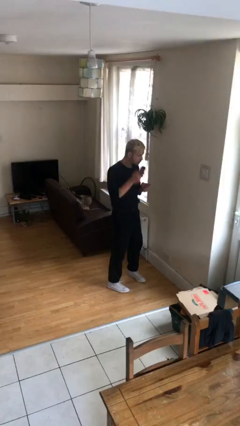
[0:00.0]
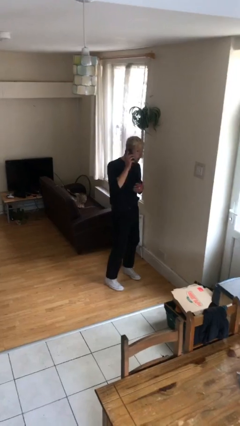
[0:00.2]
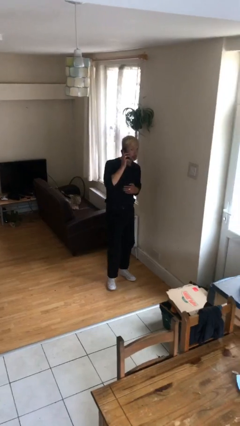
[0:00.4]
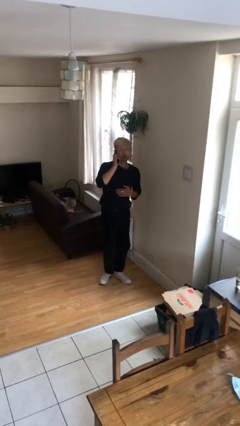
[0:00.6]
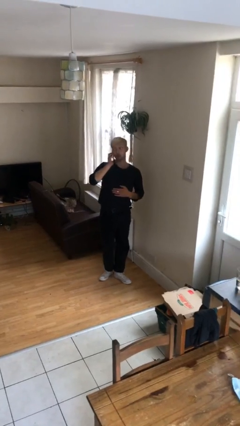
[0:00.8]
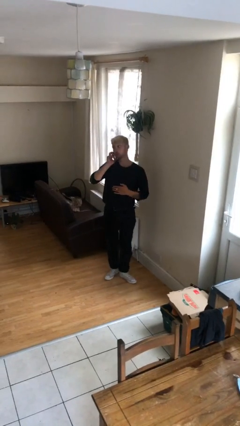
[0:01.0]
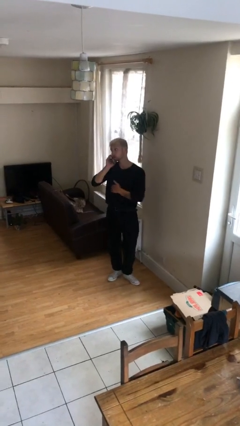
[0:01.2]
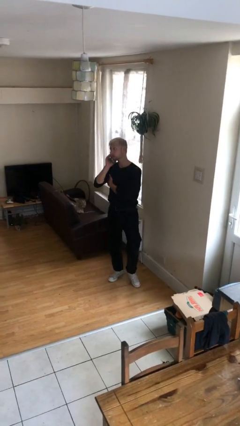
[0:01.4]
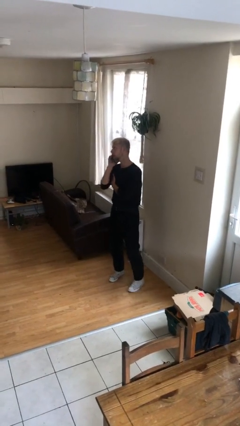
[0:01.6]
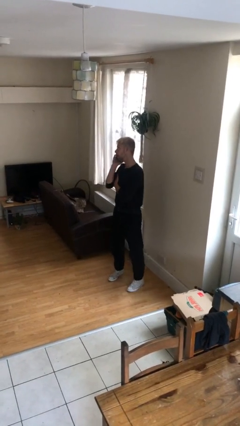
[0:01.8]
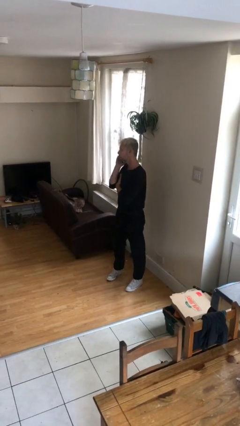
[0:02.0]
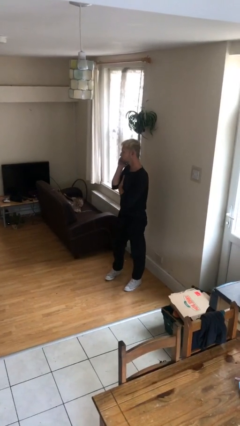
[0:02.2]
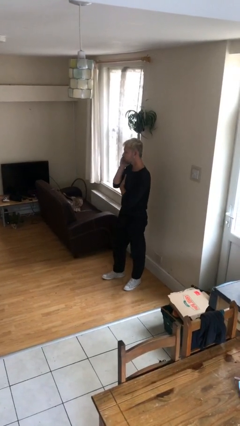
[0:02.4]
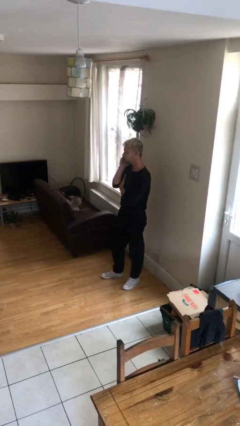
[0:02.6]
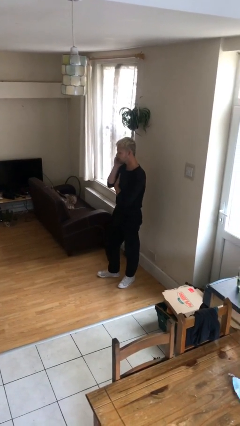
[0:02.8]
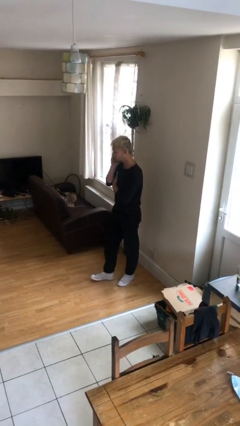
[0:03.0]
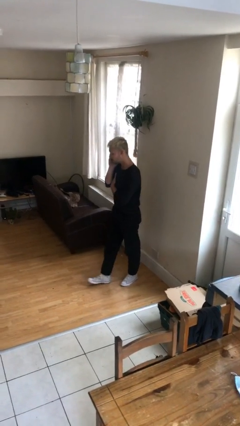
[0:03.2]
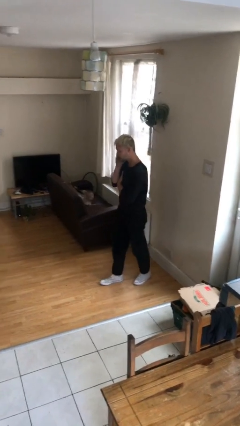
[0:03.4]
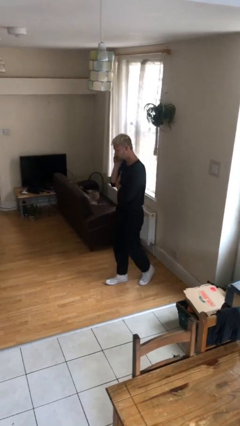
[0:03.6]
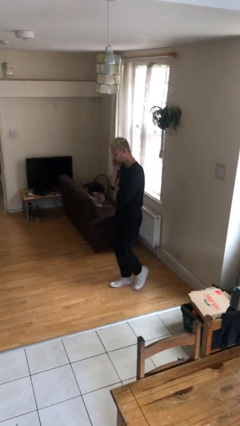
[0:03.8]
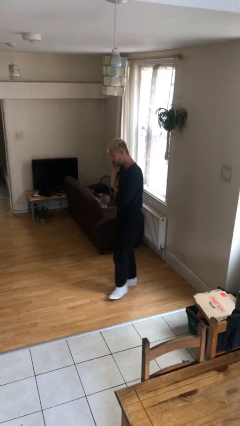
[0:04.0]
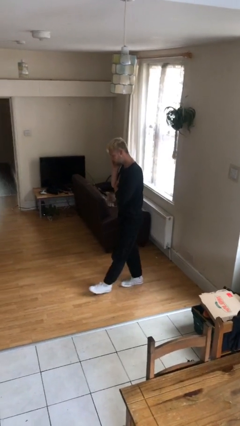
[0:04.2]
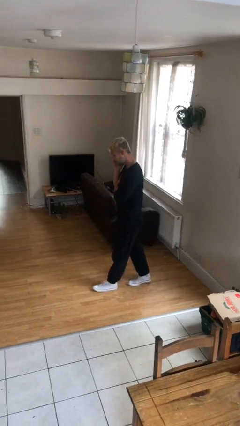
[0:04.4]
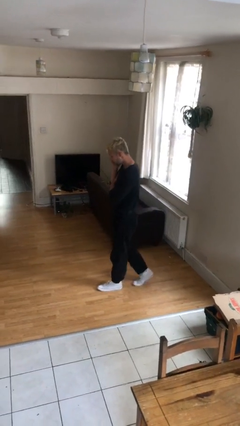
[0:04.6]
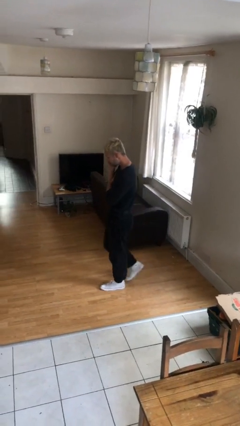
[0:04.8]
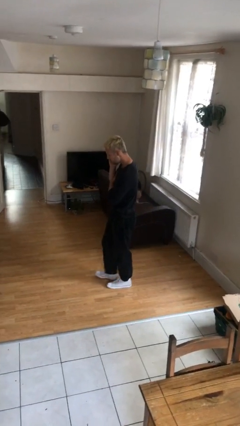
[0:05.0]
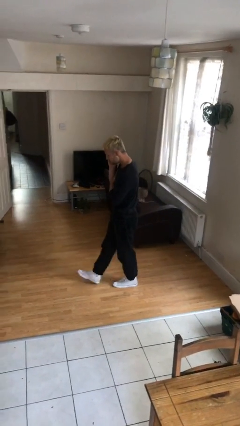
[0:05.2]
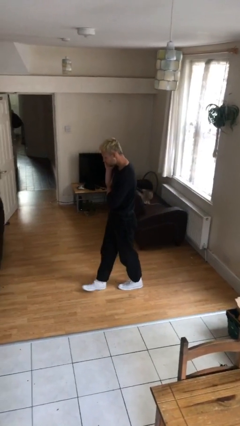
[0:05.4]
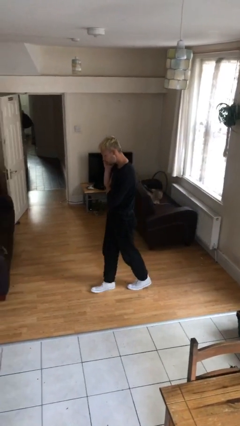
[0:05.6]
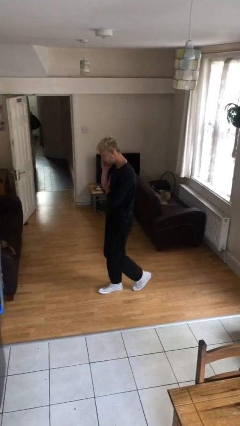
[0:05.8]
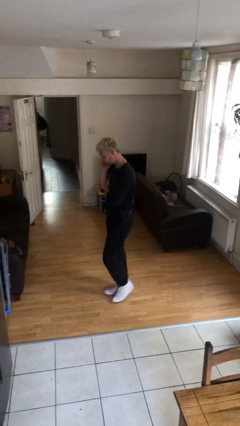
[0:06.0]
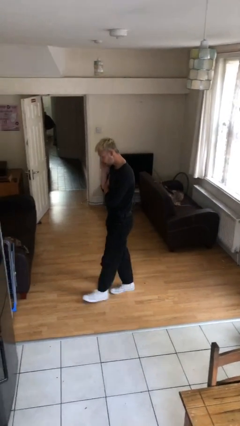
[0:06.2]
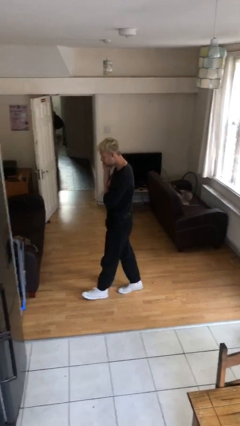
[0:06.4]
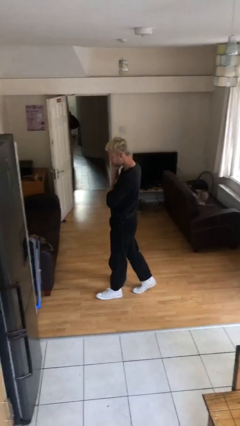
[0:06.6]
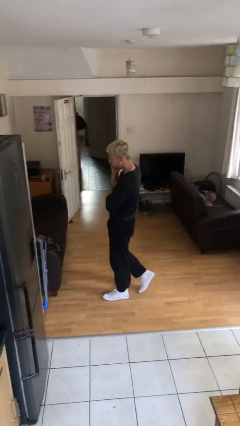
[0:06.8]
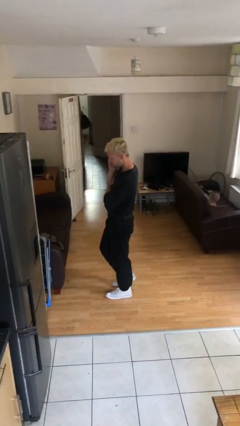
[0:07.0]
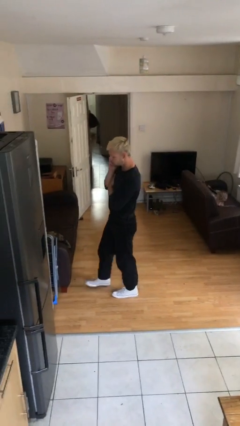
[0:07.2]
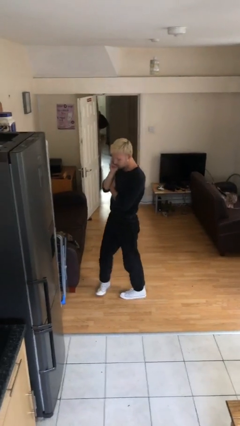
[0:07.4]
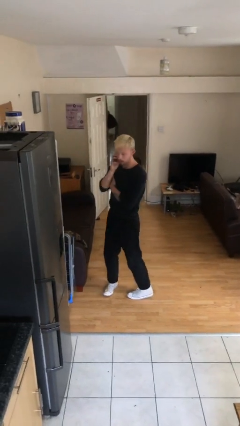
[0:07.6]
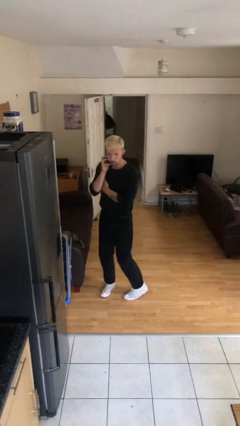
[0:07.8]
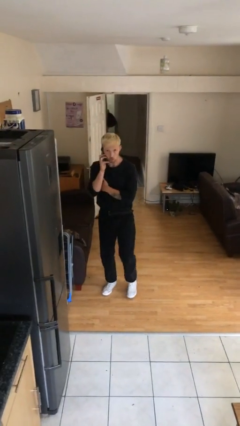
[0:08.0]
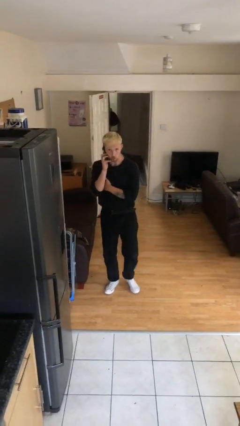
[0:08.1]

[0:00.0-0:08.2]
person talks on phone

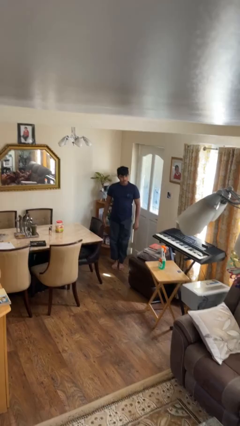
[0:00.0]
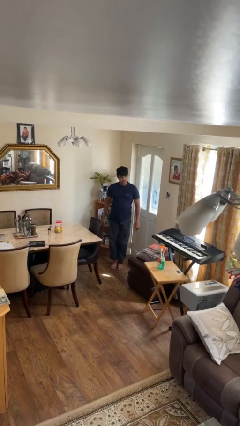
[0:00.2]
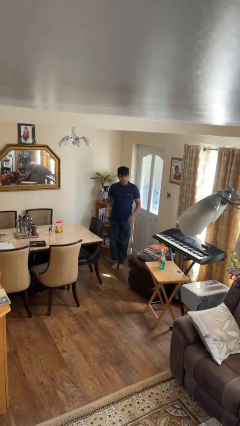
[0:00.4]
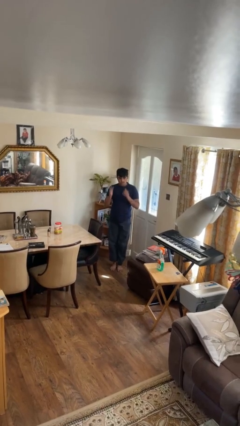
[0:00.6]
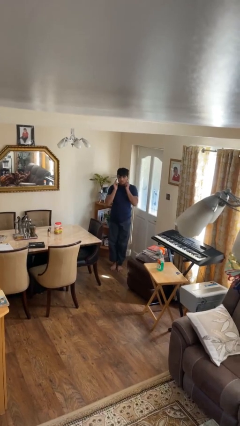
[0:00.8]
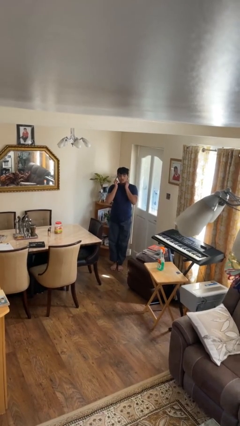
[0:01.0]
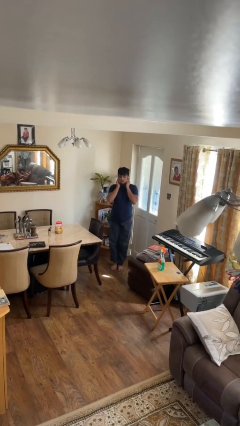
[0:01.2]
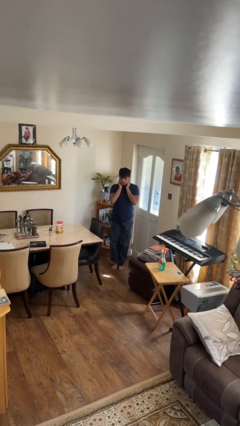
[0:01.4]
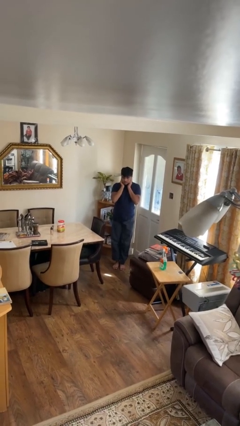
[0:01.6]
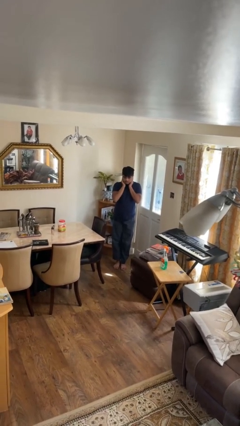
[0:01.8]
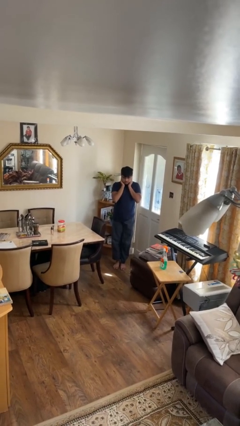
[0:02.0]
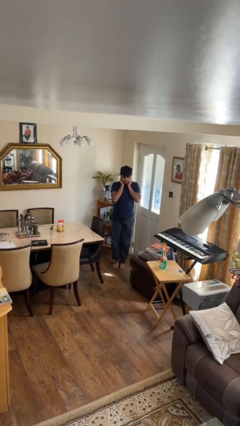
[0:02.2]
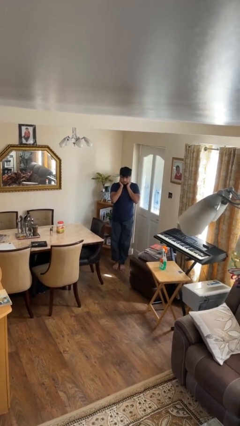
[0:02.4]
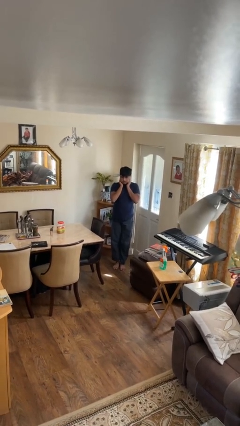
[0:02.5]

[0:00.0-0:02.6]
person puts fingers in ear

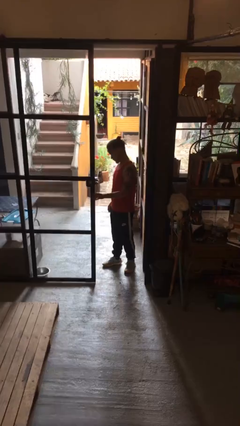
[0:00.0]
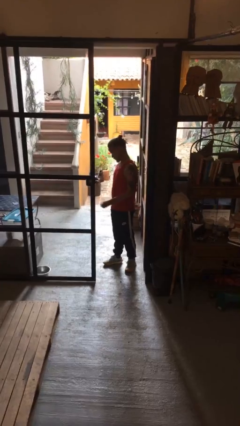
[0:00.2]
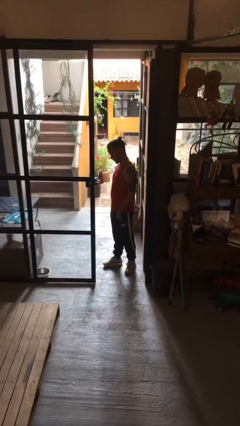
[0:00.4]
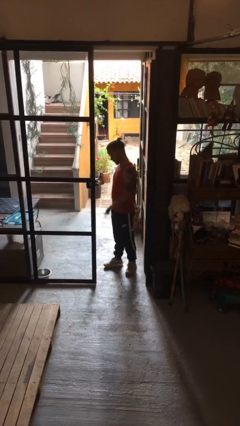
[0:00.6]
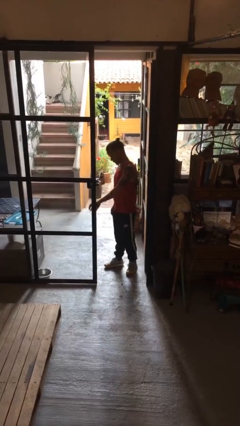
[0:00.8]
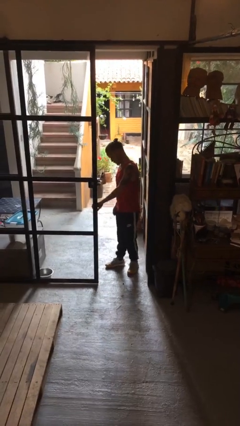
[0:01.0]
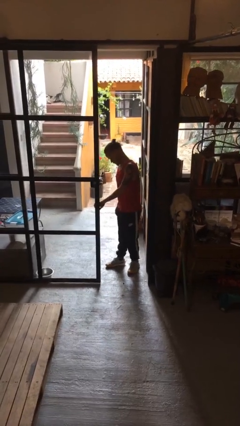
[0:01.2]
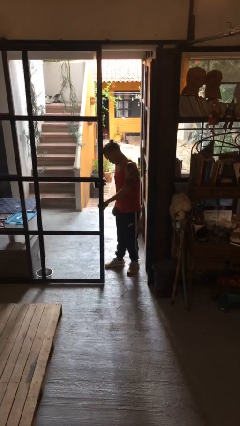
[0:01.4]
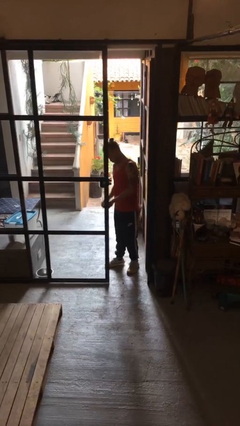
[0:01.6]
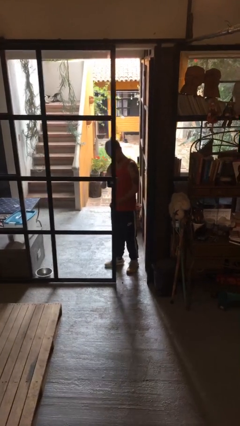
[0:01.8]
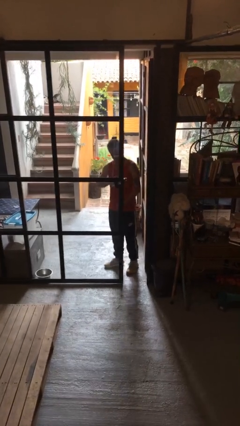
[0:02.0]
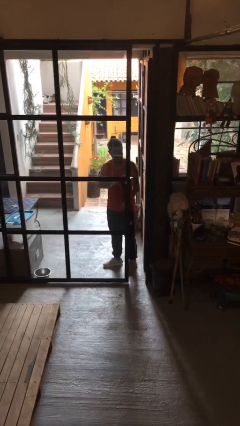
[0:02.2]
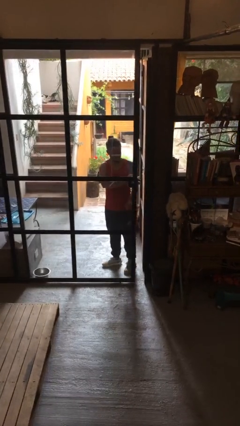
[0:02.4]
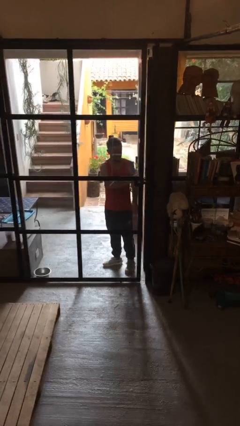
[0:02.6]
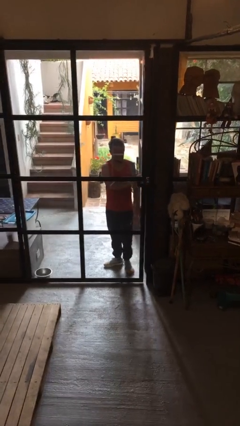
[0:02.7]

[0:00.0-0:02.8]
person closes sliding door

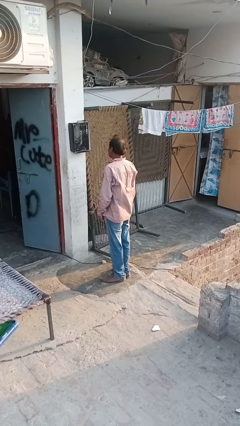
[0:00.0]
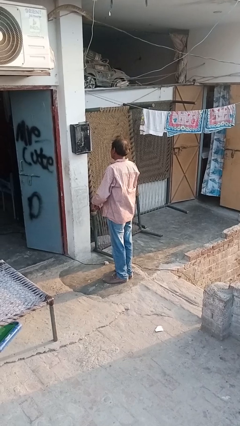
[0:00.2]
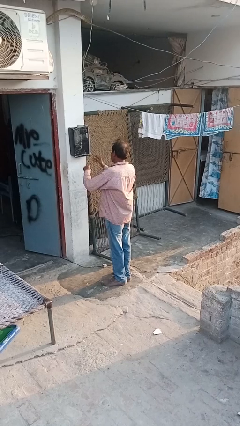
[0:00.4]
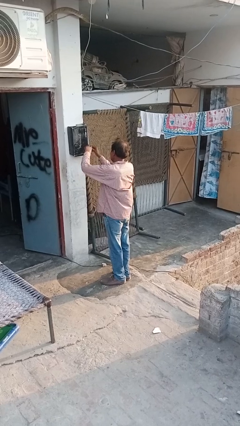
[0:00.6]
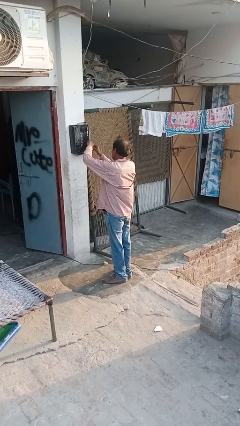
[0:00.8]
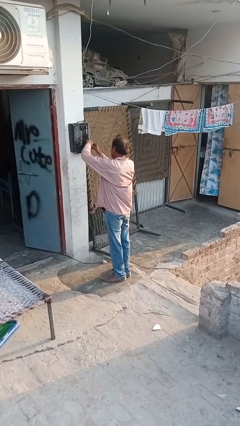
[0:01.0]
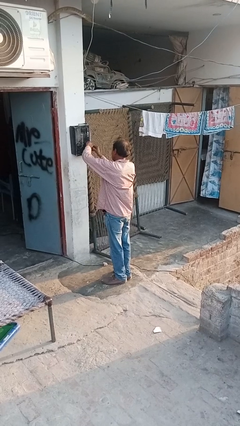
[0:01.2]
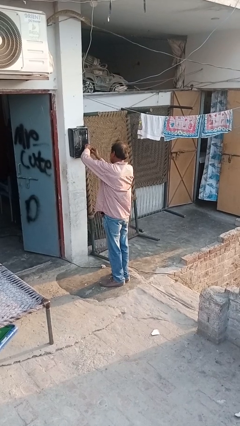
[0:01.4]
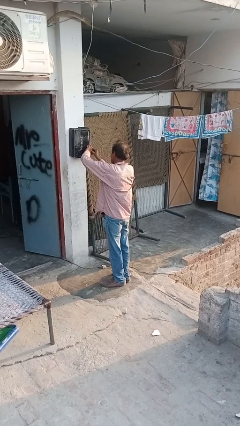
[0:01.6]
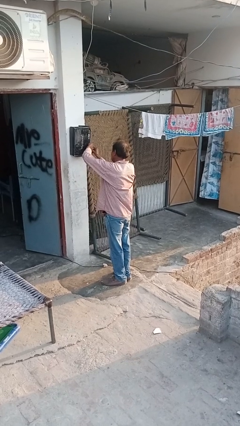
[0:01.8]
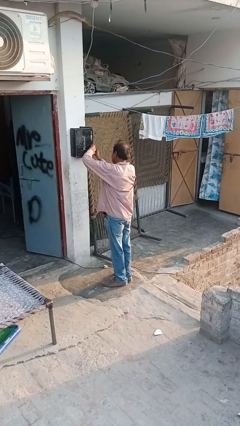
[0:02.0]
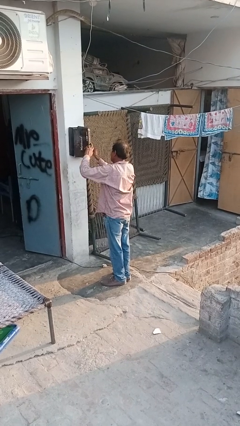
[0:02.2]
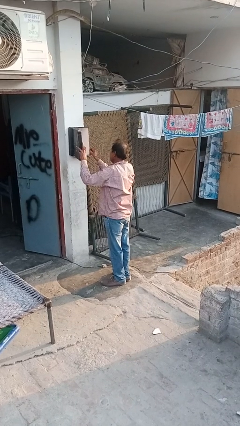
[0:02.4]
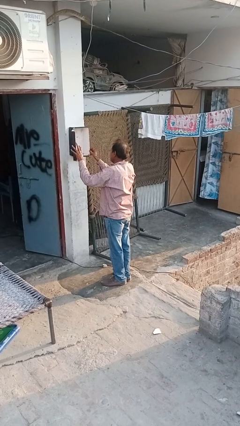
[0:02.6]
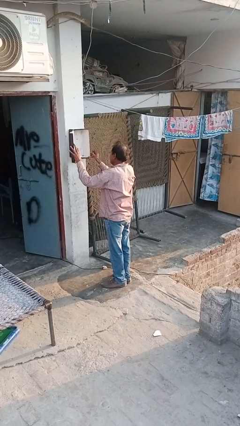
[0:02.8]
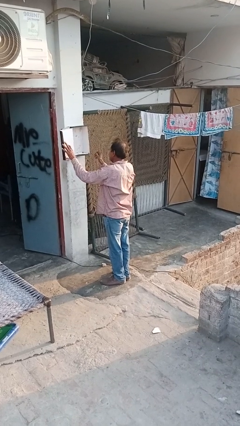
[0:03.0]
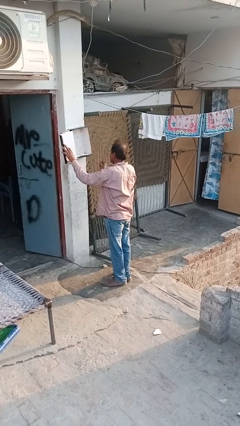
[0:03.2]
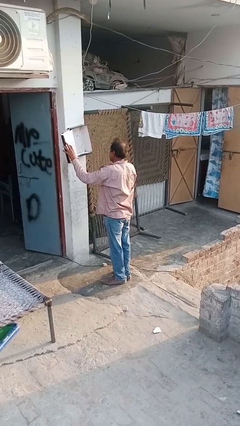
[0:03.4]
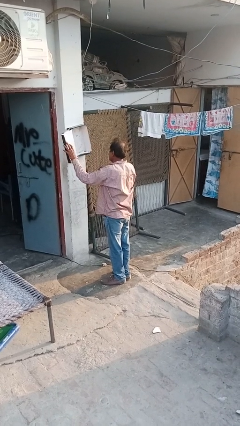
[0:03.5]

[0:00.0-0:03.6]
person opens mailbox

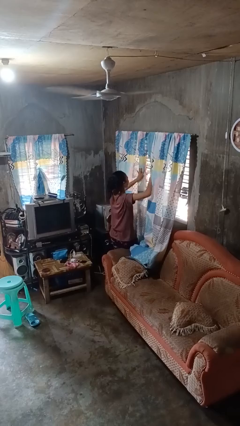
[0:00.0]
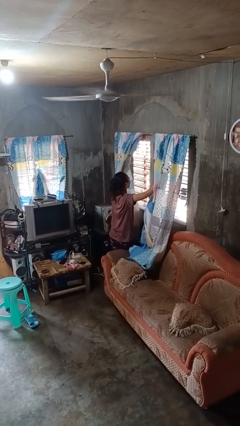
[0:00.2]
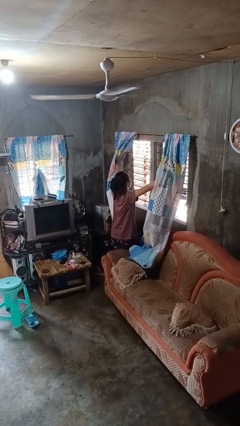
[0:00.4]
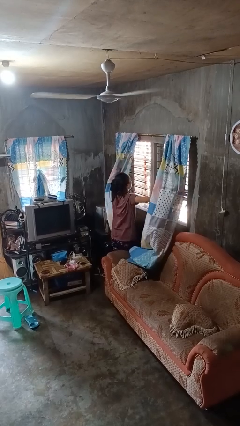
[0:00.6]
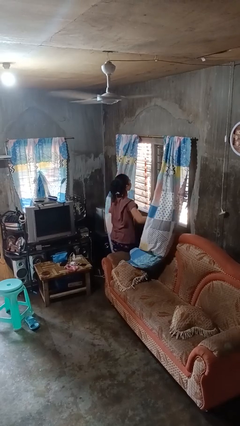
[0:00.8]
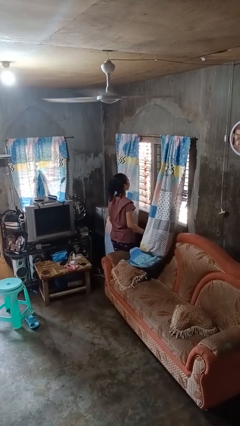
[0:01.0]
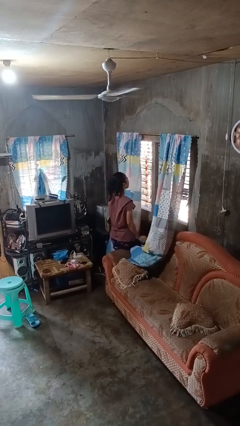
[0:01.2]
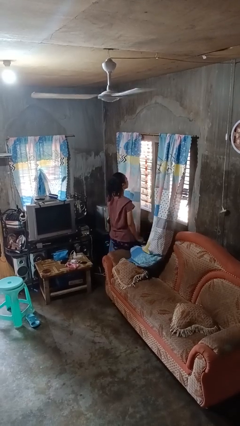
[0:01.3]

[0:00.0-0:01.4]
person opens curtains
